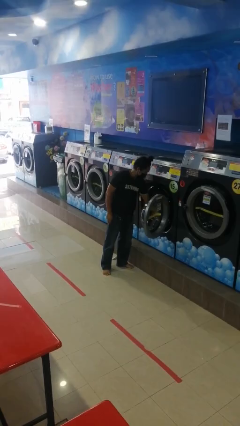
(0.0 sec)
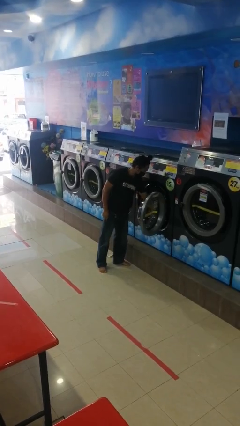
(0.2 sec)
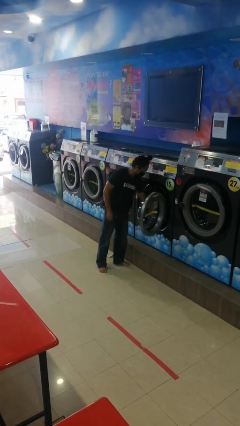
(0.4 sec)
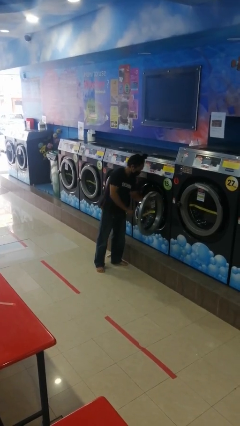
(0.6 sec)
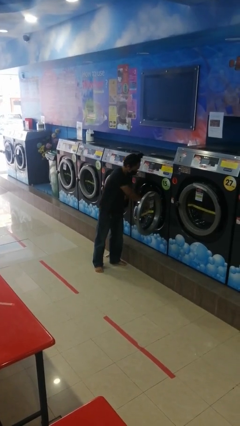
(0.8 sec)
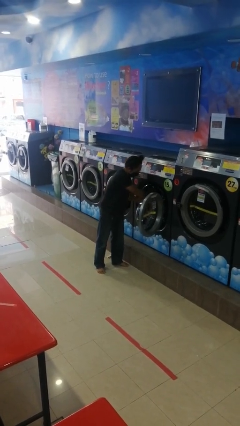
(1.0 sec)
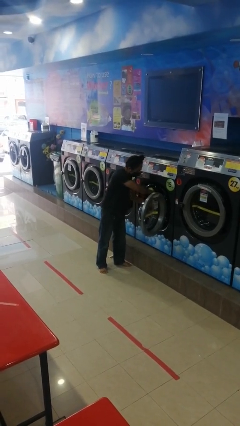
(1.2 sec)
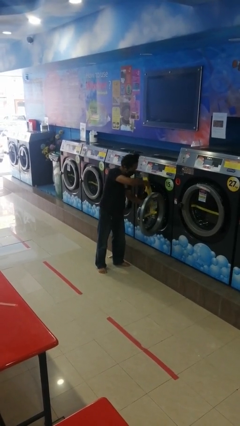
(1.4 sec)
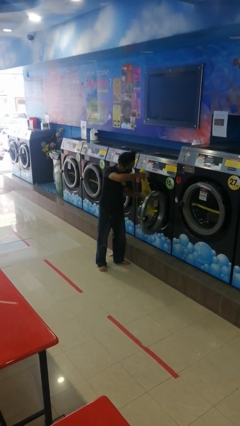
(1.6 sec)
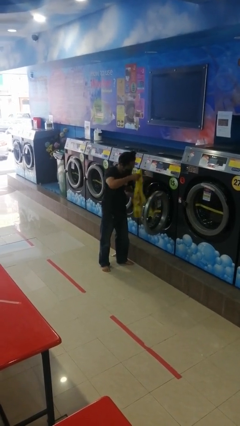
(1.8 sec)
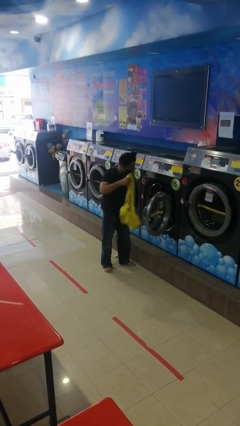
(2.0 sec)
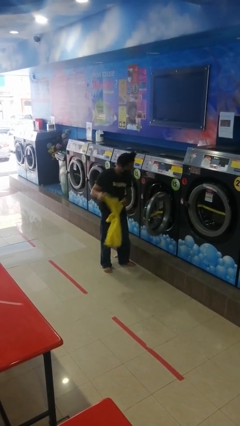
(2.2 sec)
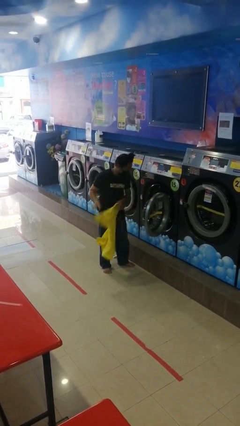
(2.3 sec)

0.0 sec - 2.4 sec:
person unloads clotheswasher

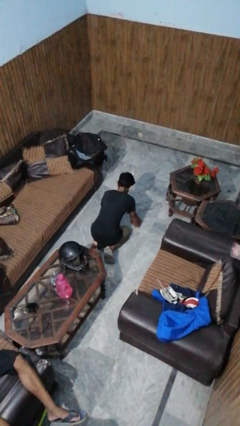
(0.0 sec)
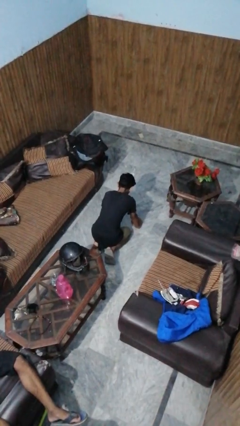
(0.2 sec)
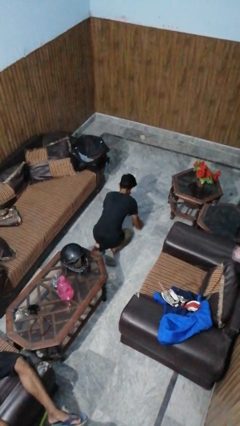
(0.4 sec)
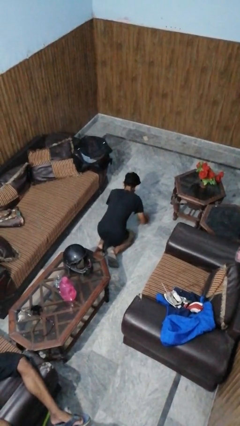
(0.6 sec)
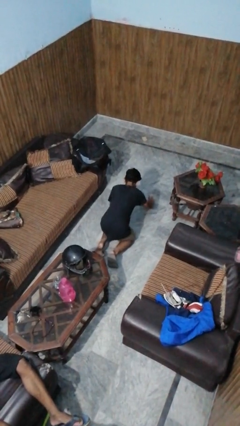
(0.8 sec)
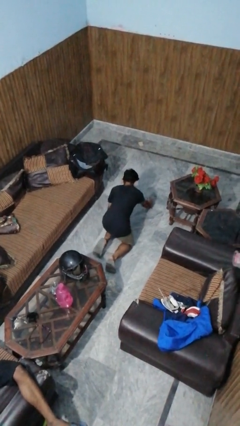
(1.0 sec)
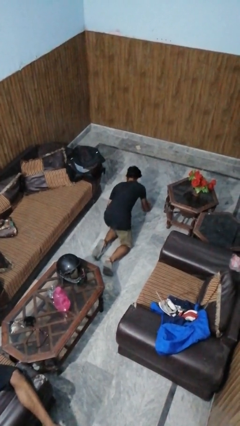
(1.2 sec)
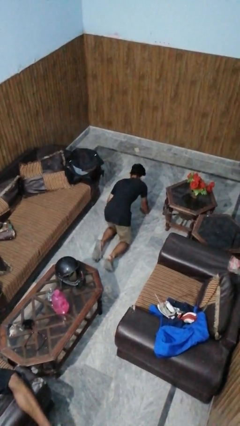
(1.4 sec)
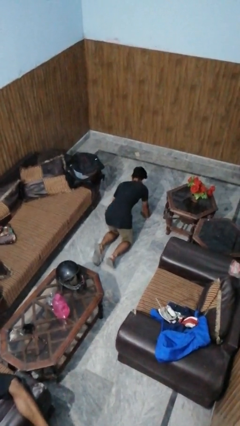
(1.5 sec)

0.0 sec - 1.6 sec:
person crawls

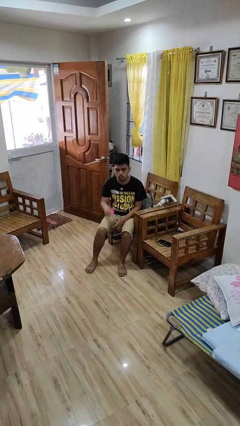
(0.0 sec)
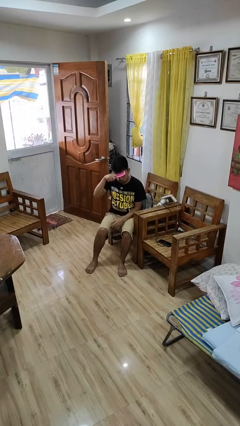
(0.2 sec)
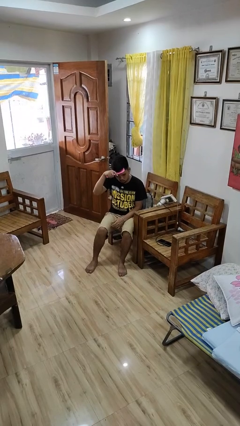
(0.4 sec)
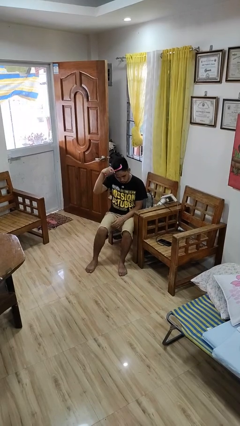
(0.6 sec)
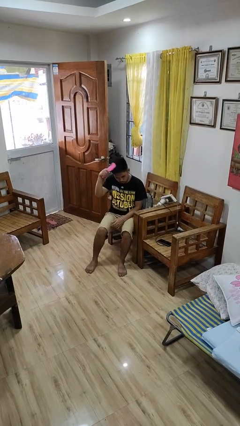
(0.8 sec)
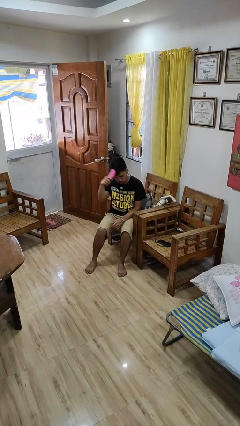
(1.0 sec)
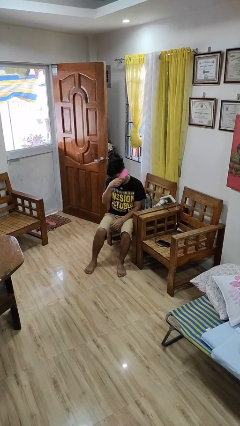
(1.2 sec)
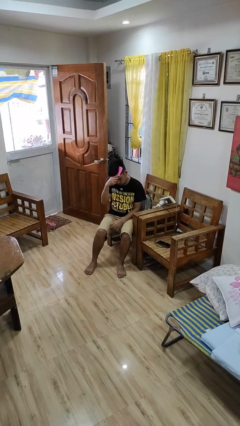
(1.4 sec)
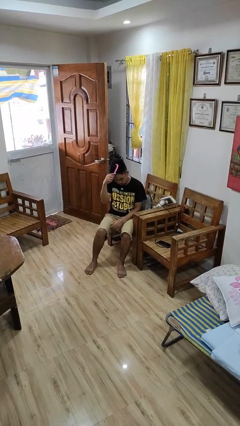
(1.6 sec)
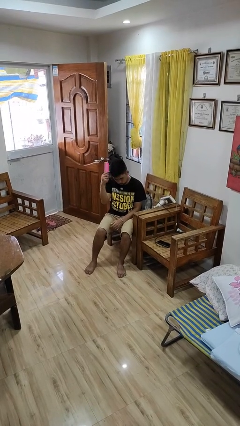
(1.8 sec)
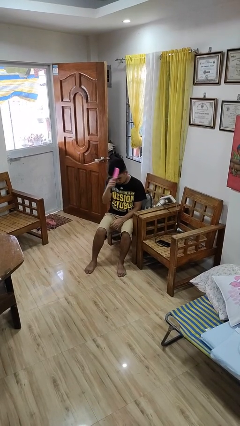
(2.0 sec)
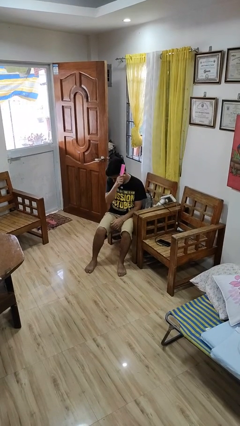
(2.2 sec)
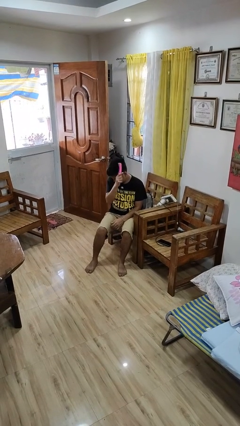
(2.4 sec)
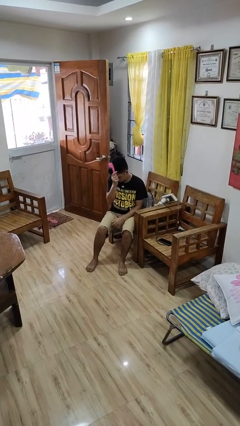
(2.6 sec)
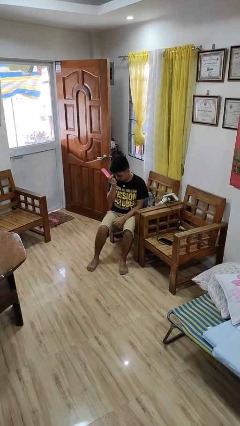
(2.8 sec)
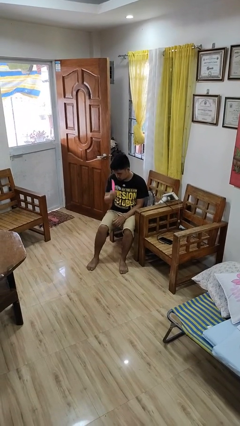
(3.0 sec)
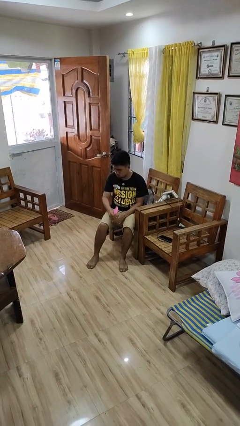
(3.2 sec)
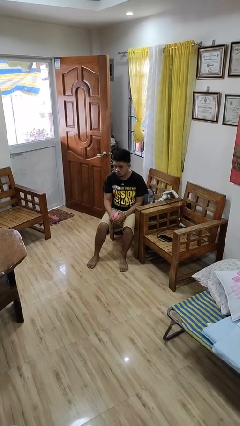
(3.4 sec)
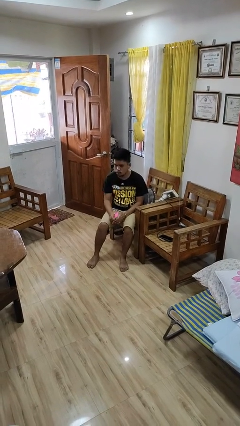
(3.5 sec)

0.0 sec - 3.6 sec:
person brushes hair

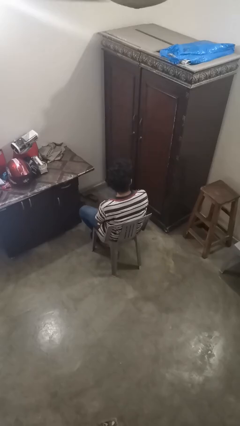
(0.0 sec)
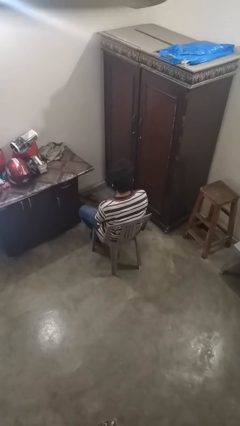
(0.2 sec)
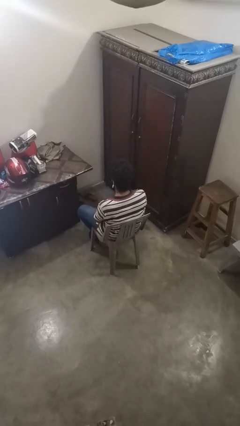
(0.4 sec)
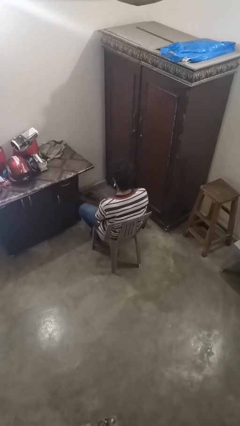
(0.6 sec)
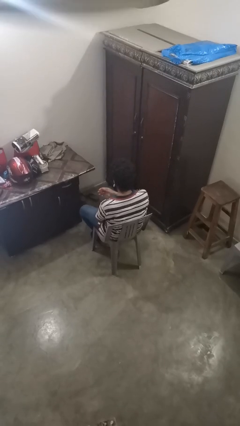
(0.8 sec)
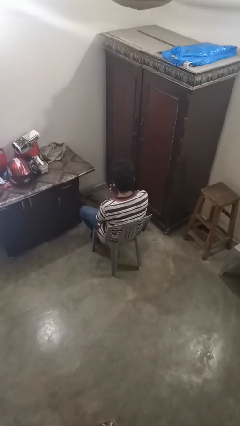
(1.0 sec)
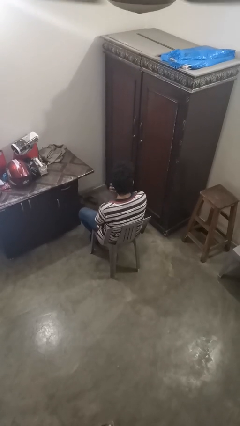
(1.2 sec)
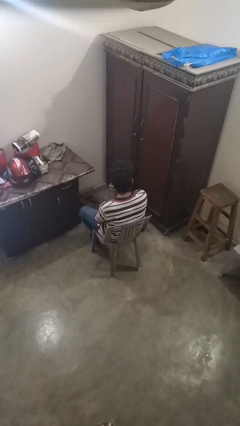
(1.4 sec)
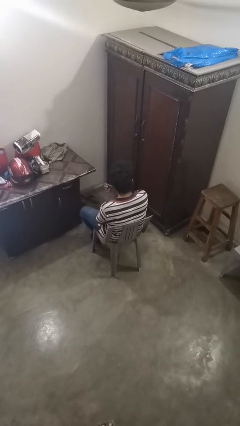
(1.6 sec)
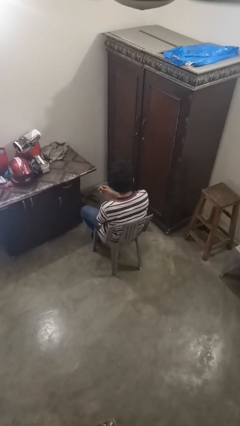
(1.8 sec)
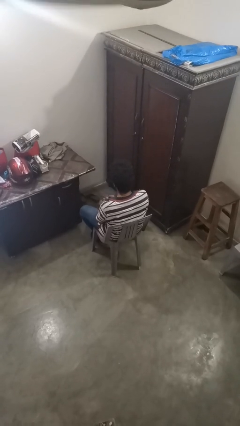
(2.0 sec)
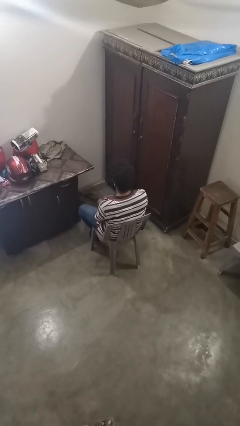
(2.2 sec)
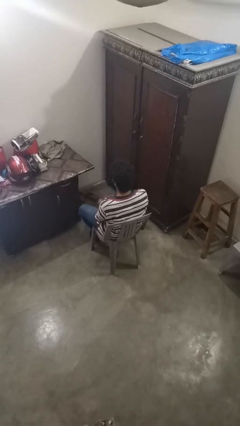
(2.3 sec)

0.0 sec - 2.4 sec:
person takes off earrings

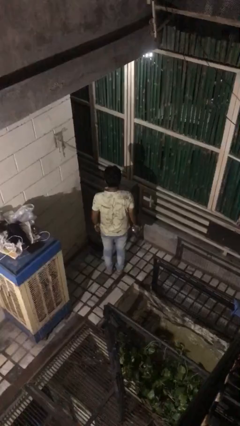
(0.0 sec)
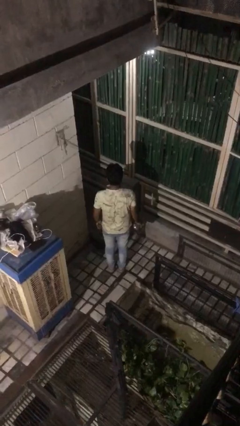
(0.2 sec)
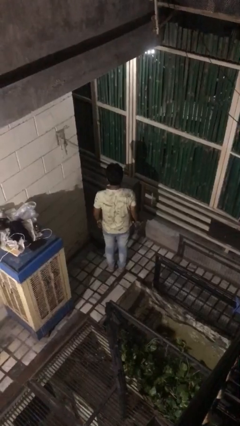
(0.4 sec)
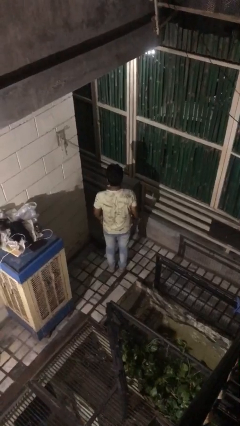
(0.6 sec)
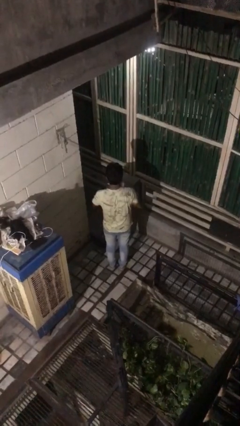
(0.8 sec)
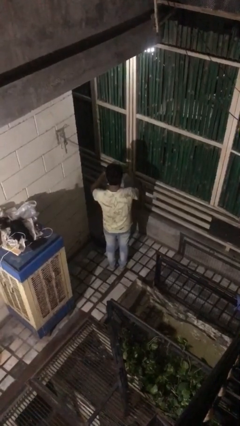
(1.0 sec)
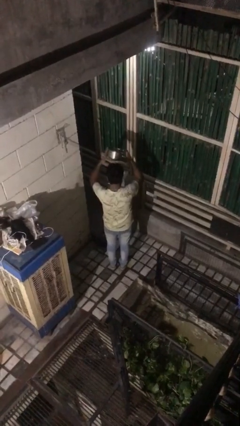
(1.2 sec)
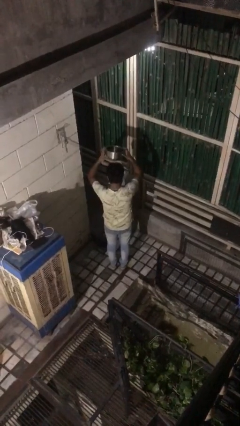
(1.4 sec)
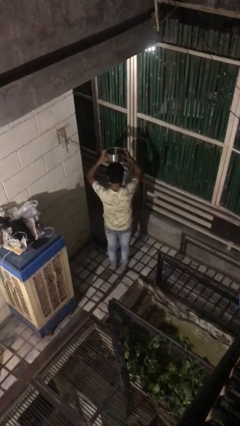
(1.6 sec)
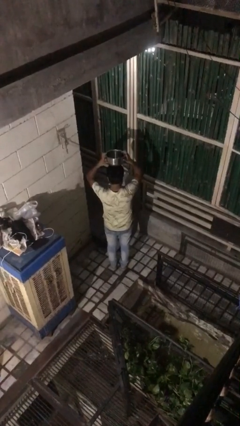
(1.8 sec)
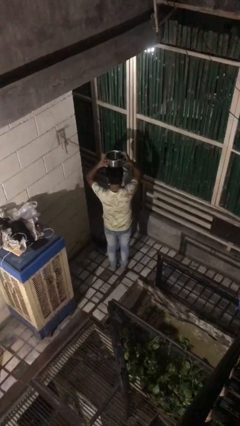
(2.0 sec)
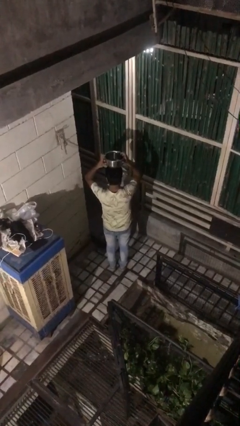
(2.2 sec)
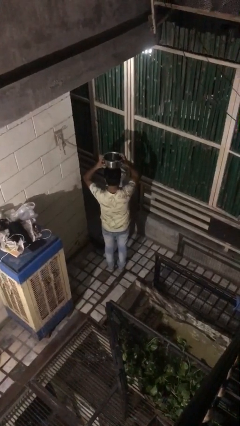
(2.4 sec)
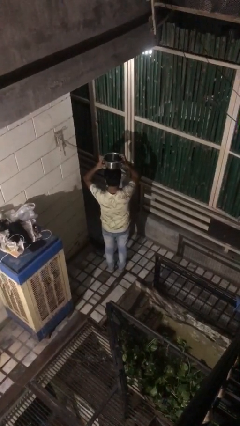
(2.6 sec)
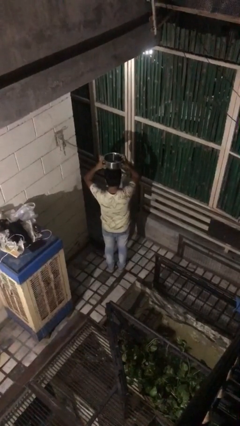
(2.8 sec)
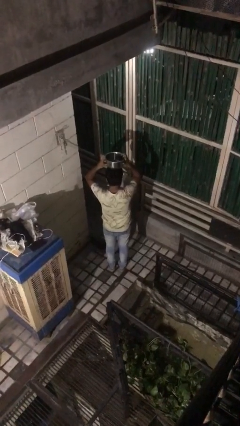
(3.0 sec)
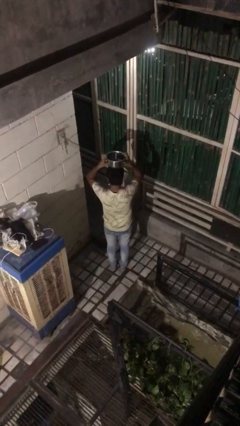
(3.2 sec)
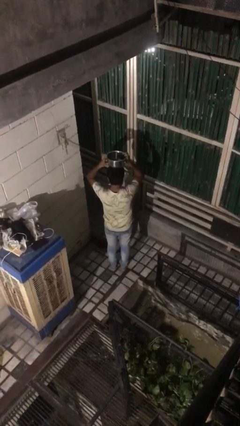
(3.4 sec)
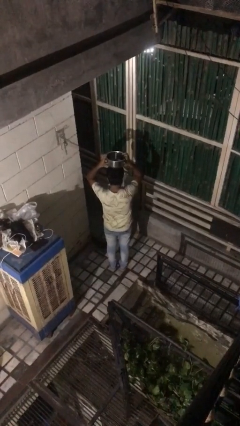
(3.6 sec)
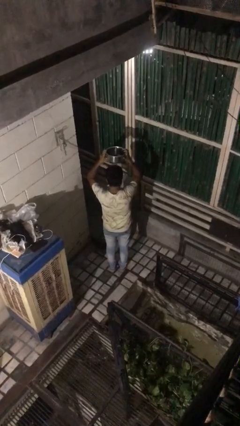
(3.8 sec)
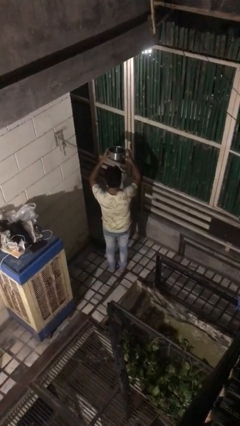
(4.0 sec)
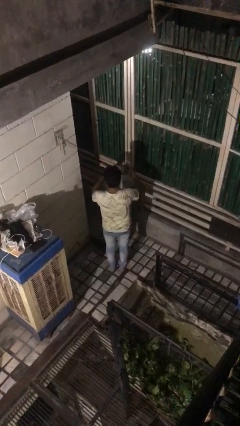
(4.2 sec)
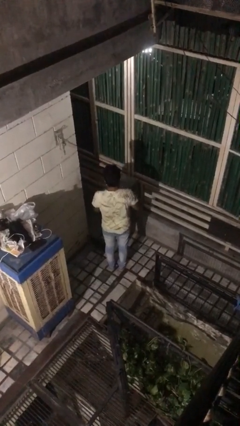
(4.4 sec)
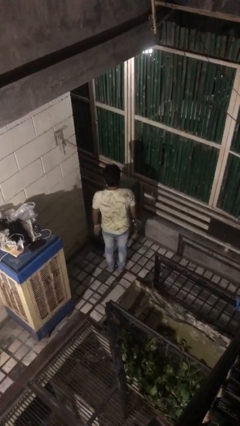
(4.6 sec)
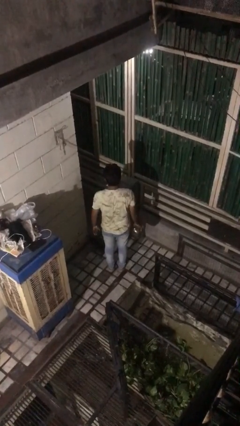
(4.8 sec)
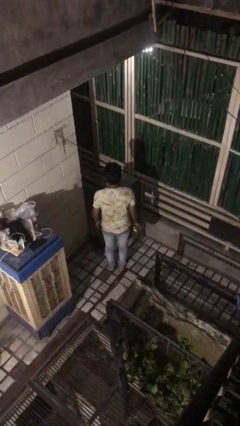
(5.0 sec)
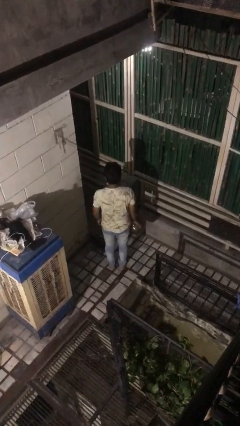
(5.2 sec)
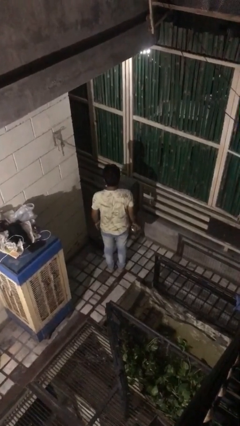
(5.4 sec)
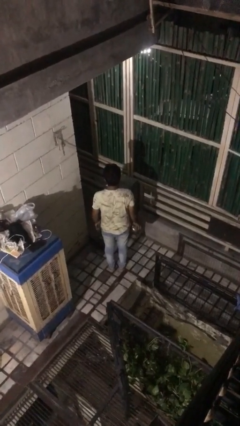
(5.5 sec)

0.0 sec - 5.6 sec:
person holds object above head

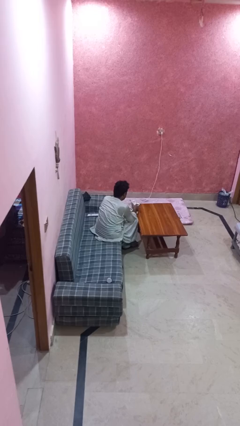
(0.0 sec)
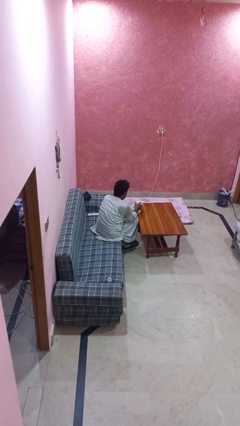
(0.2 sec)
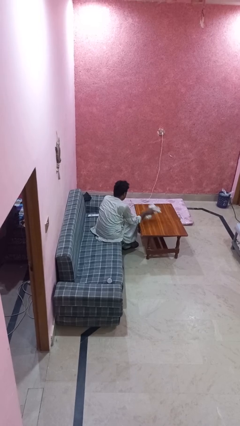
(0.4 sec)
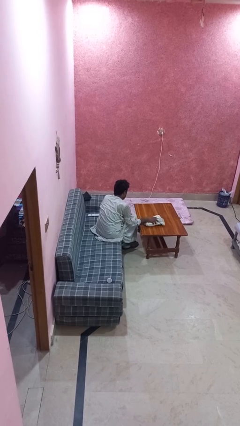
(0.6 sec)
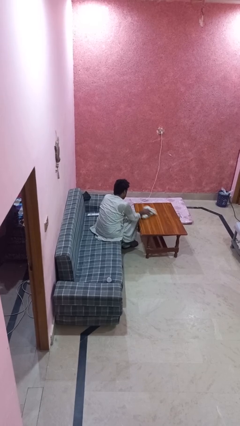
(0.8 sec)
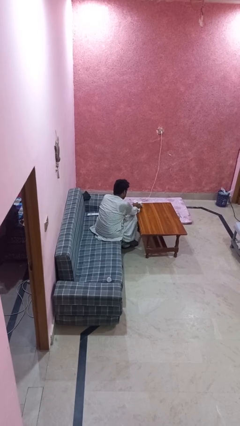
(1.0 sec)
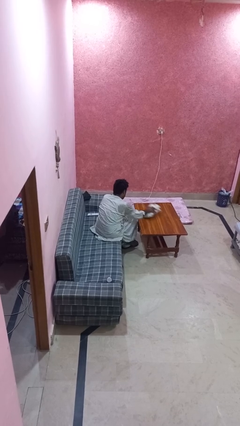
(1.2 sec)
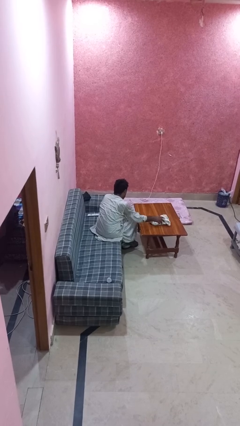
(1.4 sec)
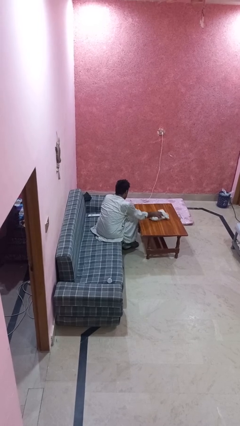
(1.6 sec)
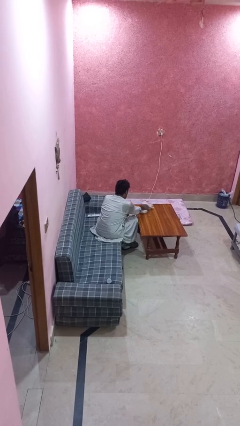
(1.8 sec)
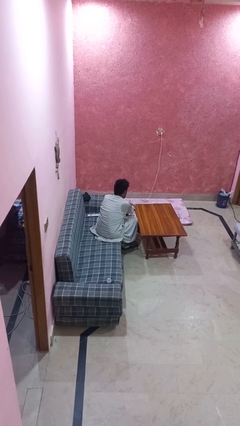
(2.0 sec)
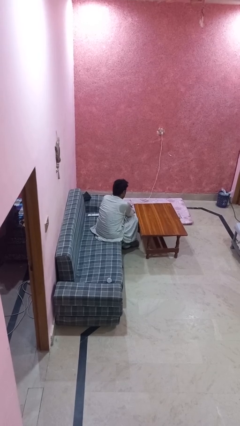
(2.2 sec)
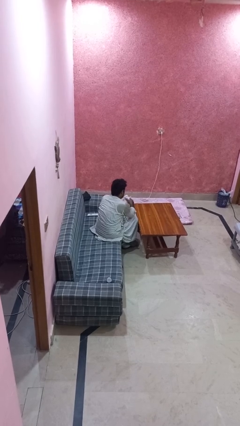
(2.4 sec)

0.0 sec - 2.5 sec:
person cleans table with rag
